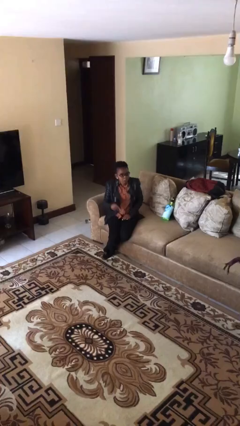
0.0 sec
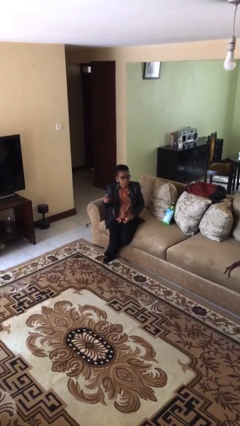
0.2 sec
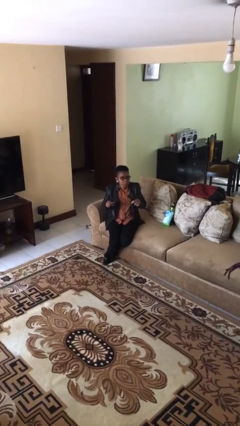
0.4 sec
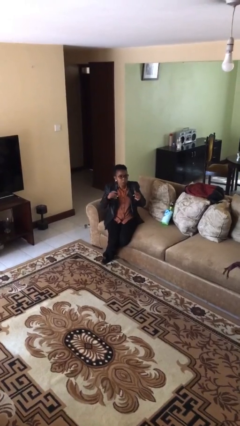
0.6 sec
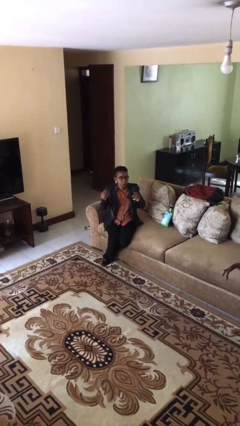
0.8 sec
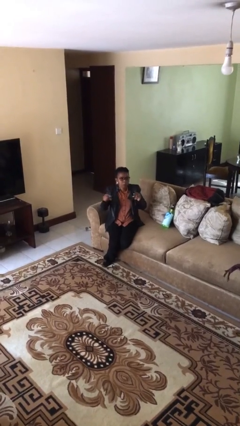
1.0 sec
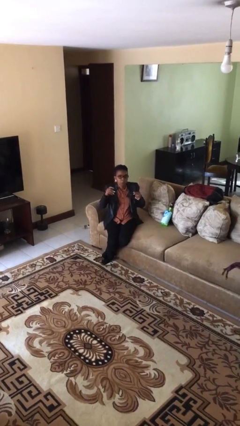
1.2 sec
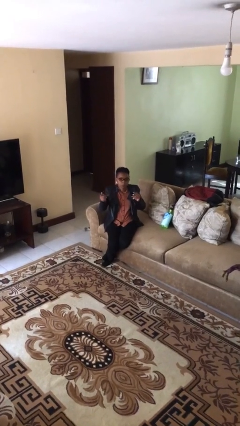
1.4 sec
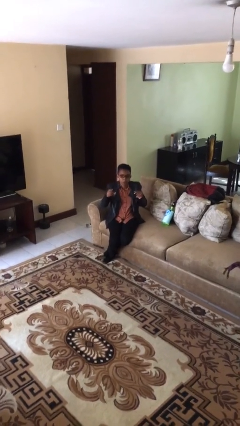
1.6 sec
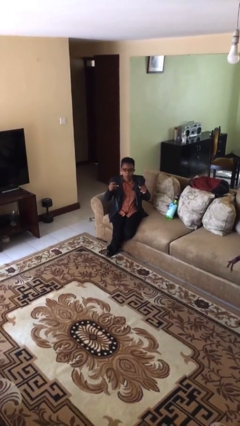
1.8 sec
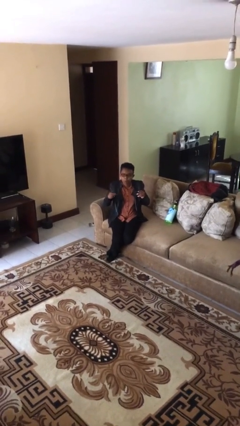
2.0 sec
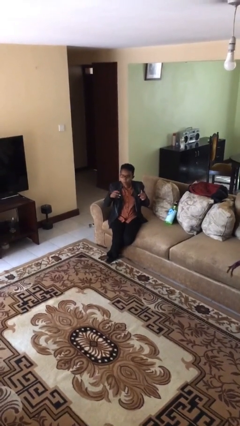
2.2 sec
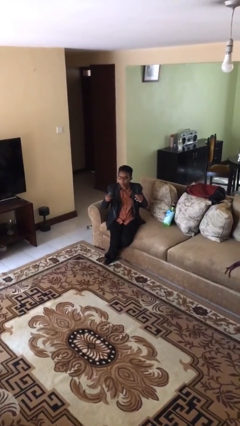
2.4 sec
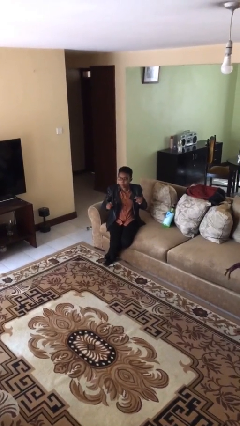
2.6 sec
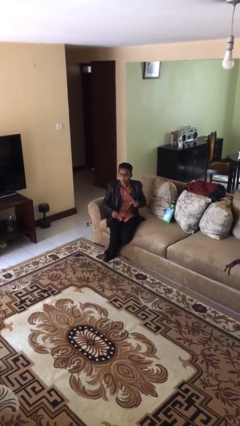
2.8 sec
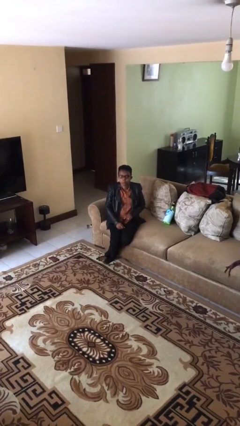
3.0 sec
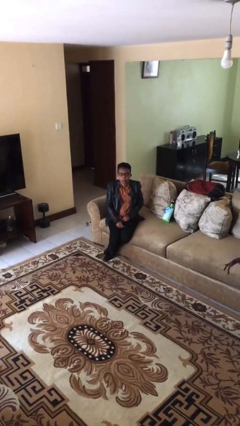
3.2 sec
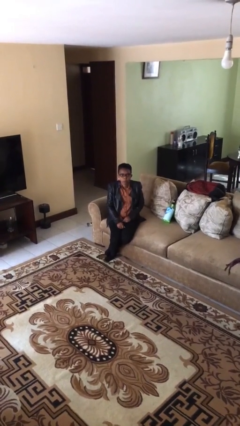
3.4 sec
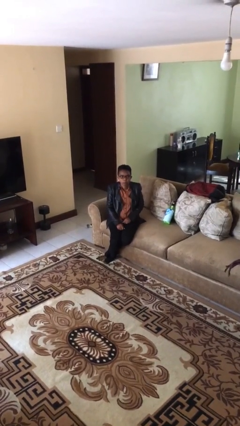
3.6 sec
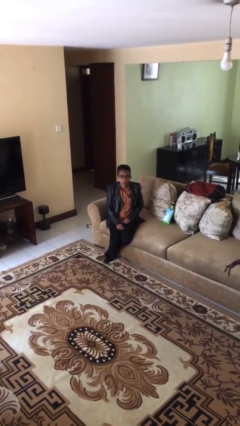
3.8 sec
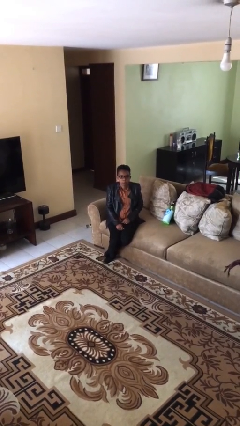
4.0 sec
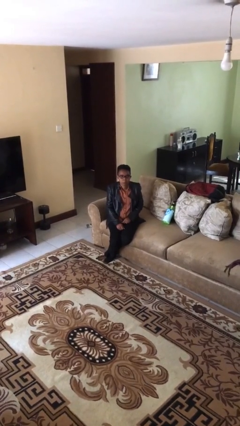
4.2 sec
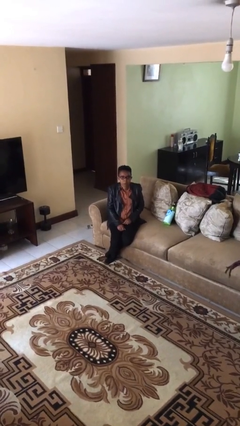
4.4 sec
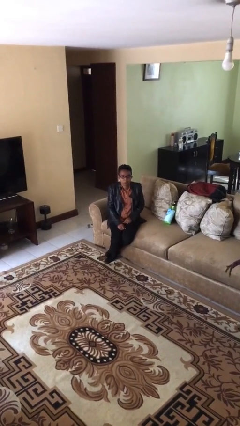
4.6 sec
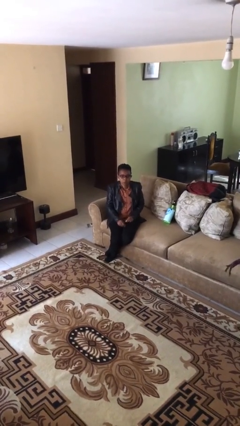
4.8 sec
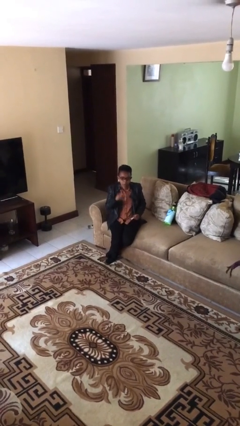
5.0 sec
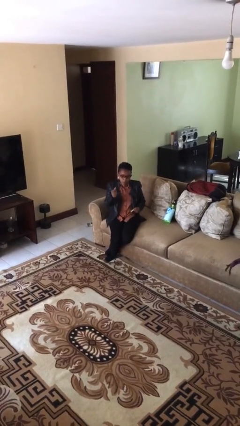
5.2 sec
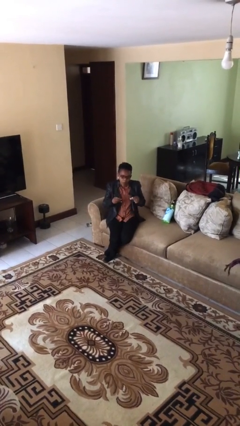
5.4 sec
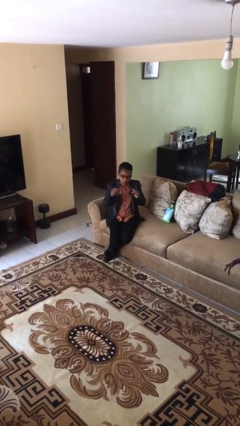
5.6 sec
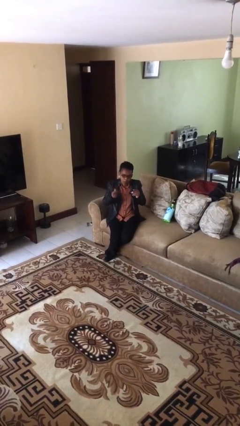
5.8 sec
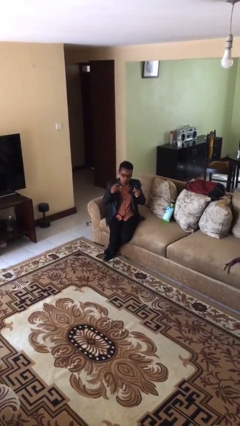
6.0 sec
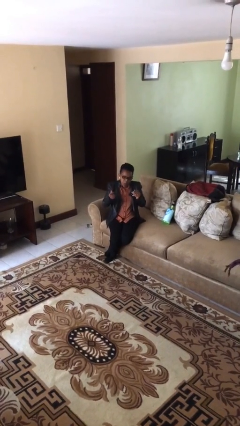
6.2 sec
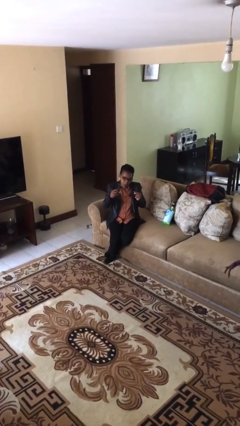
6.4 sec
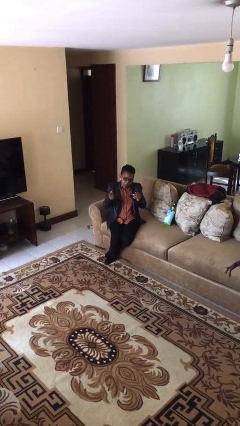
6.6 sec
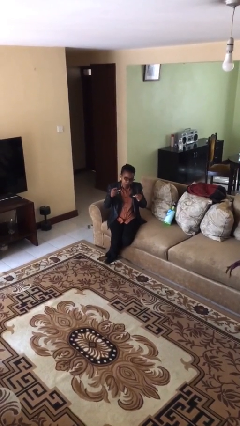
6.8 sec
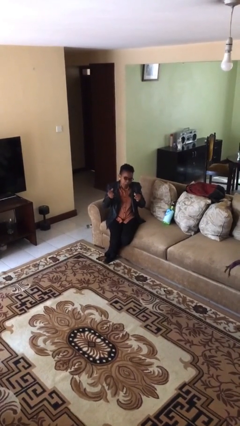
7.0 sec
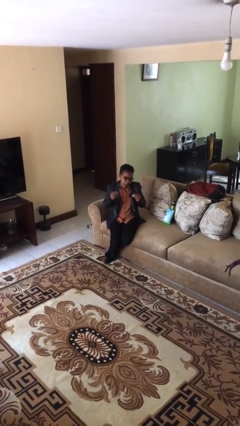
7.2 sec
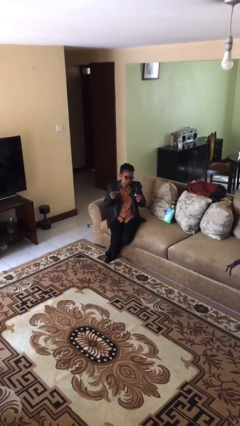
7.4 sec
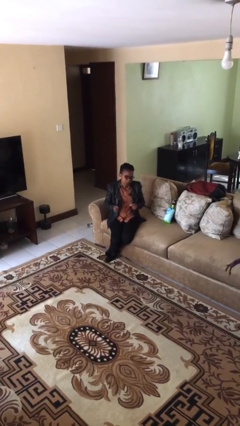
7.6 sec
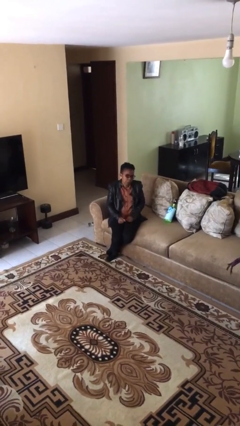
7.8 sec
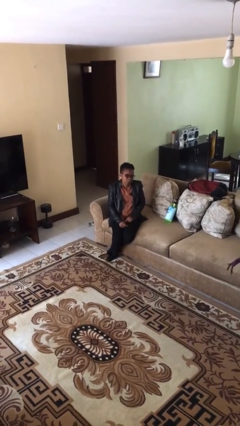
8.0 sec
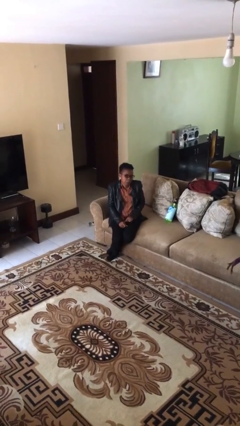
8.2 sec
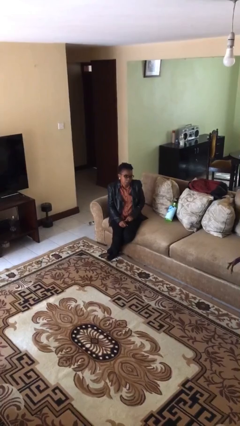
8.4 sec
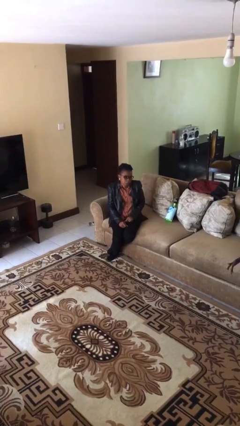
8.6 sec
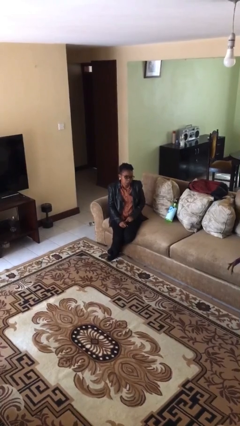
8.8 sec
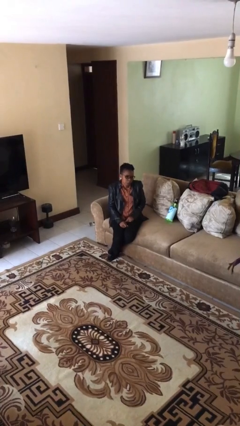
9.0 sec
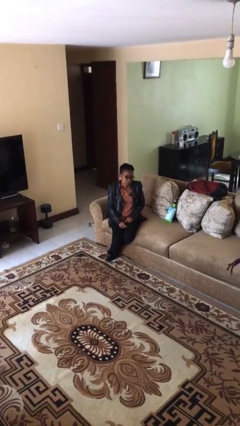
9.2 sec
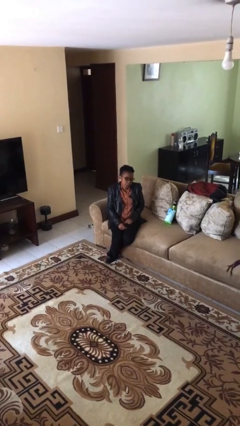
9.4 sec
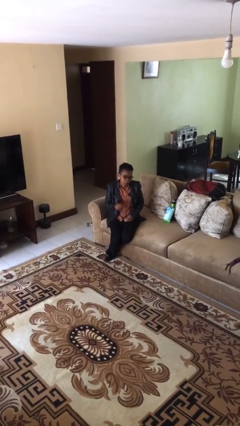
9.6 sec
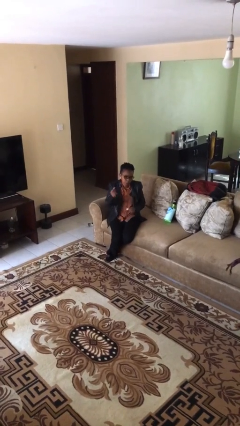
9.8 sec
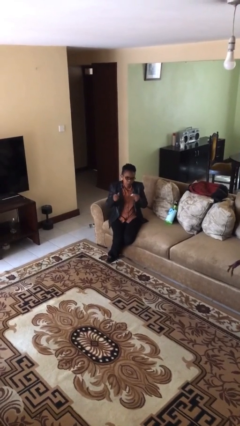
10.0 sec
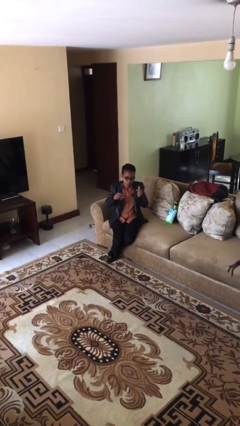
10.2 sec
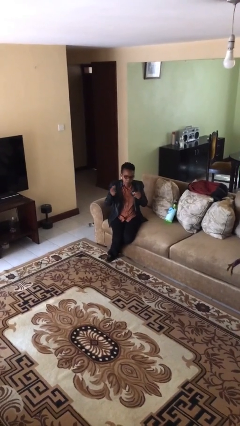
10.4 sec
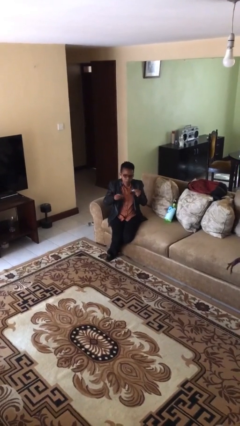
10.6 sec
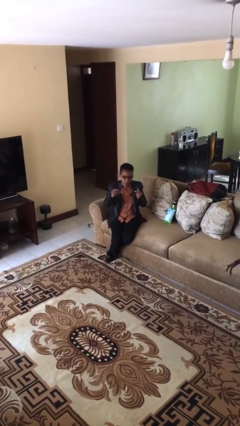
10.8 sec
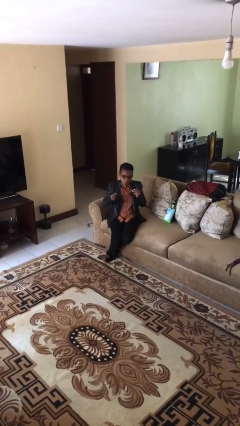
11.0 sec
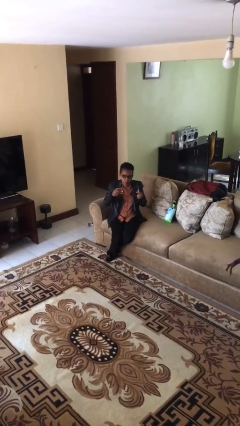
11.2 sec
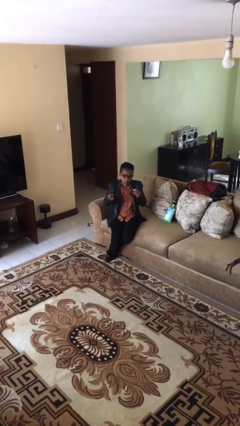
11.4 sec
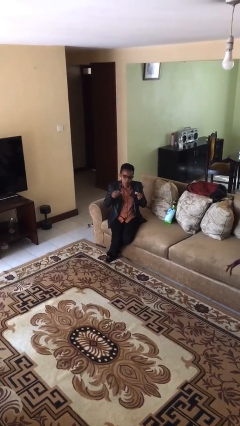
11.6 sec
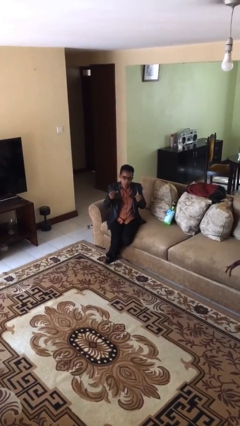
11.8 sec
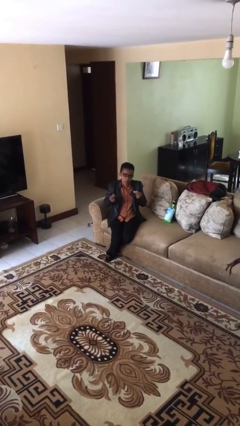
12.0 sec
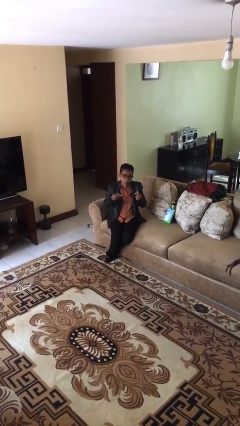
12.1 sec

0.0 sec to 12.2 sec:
person snaps fingers

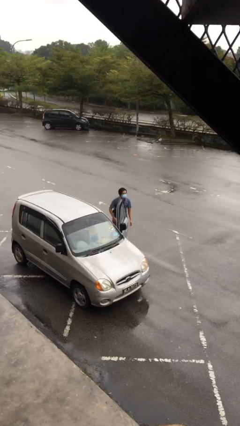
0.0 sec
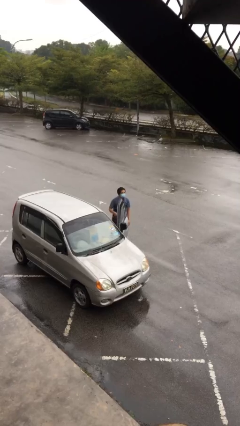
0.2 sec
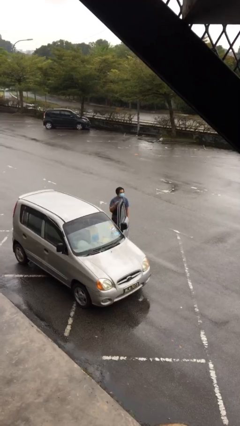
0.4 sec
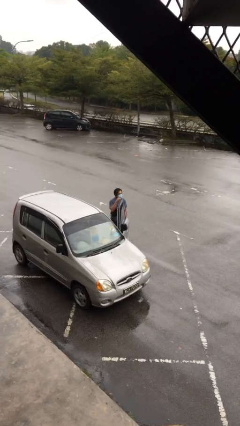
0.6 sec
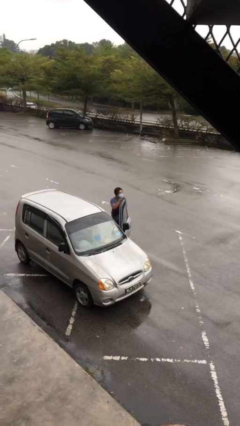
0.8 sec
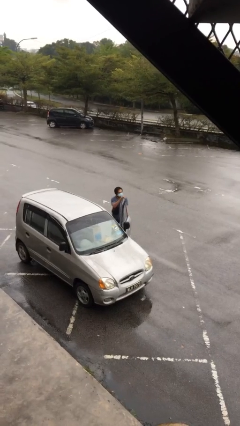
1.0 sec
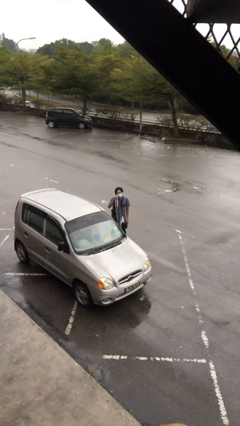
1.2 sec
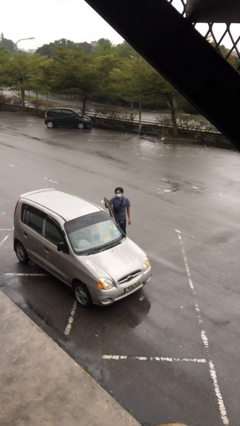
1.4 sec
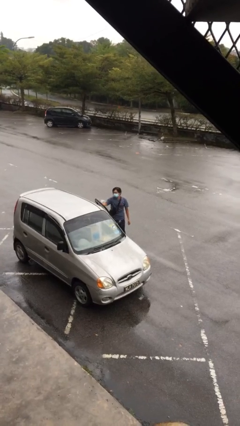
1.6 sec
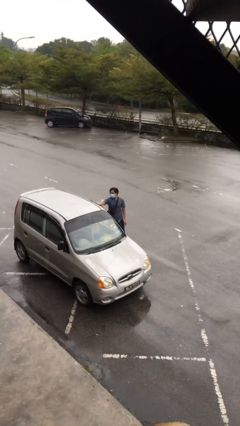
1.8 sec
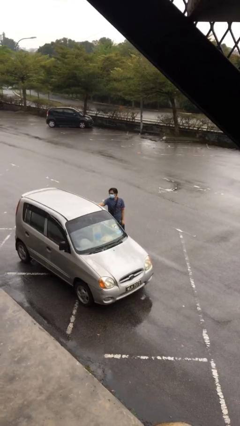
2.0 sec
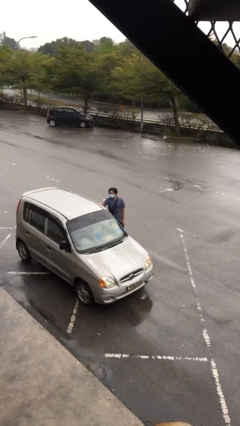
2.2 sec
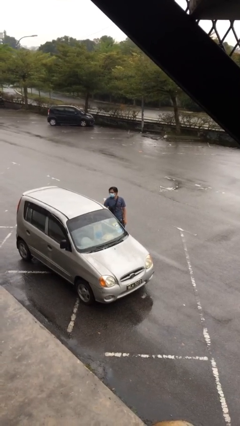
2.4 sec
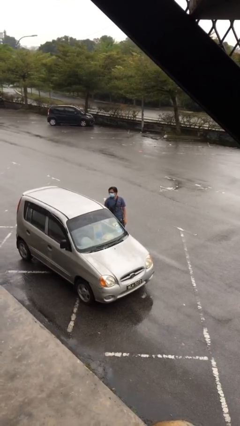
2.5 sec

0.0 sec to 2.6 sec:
person closes car door

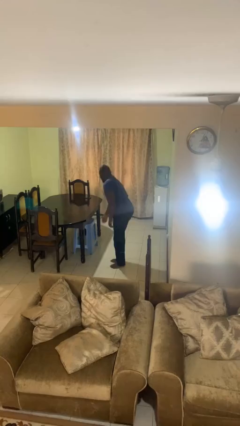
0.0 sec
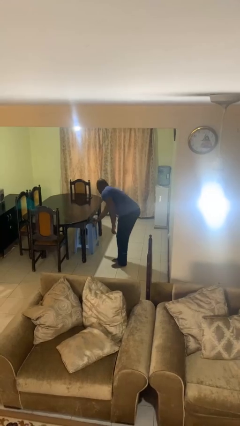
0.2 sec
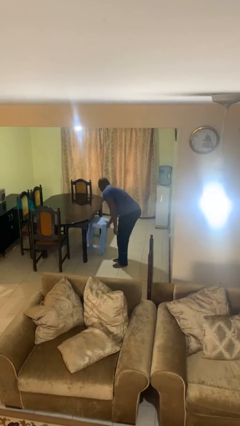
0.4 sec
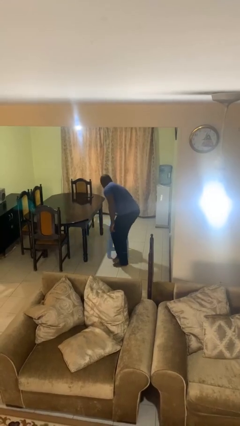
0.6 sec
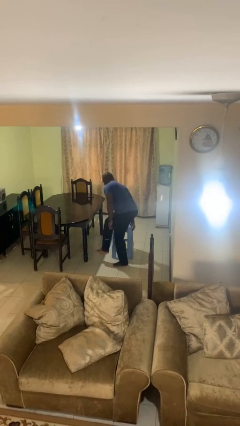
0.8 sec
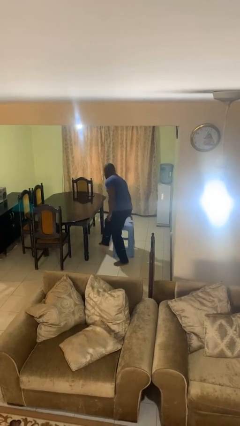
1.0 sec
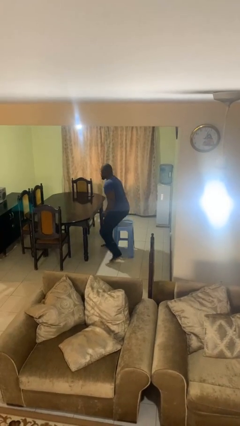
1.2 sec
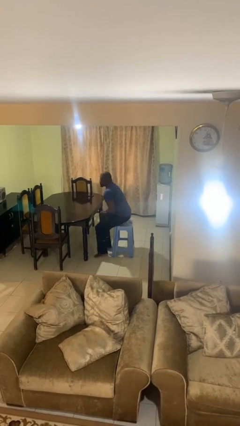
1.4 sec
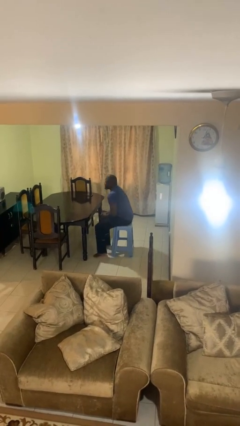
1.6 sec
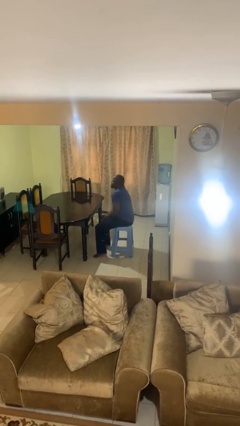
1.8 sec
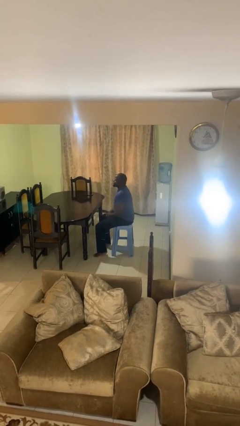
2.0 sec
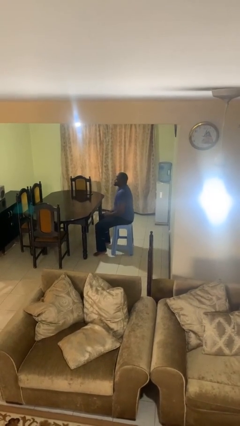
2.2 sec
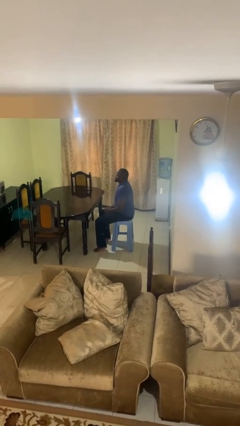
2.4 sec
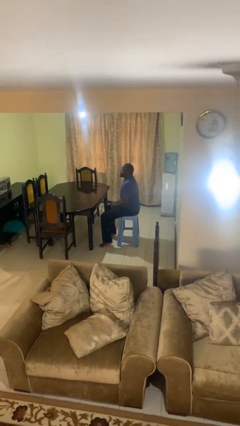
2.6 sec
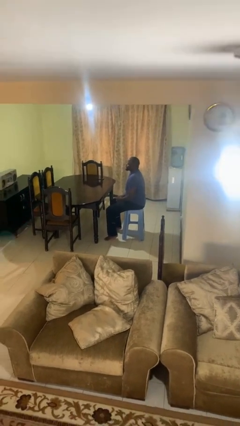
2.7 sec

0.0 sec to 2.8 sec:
person sits down

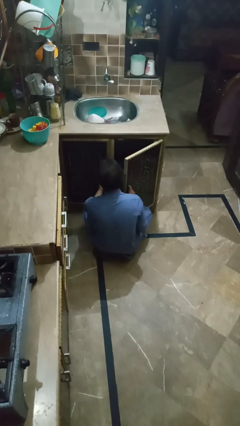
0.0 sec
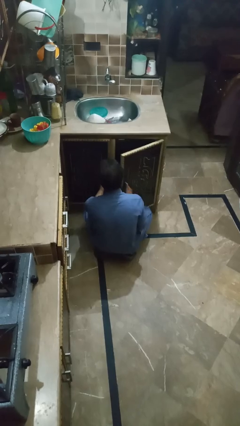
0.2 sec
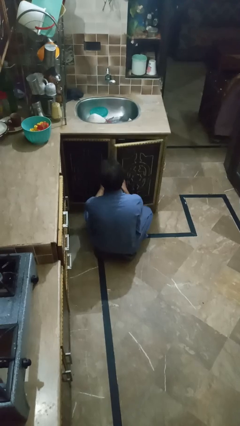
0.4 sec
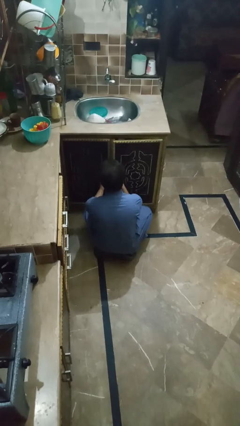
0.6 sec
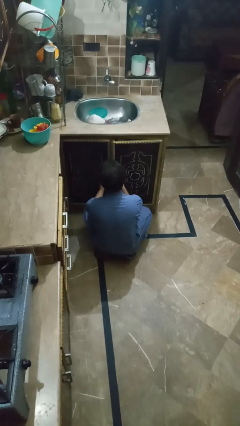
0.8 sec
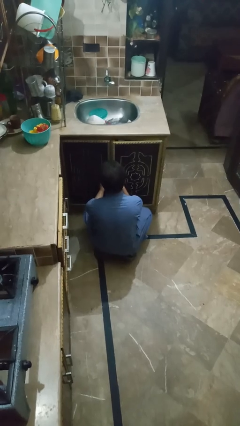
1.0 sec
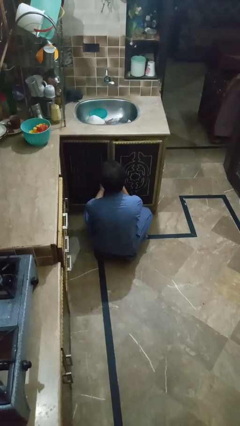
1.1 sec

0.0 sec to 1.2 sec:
person closes kitchen drawer
